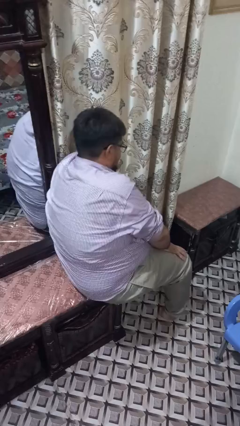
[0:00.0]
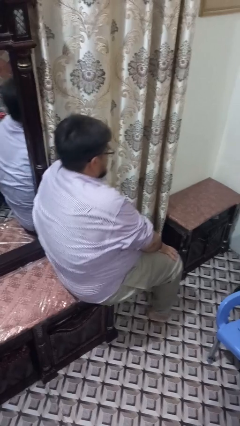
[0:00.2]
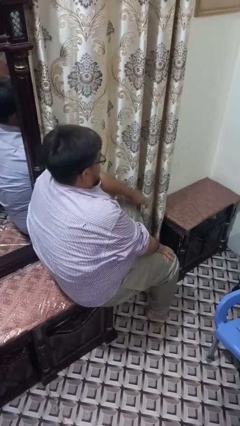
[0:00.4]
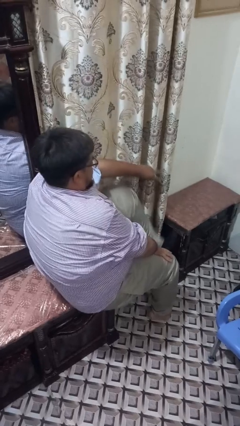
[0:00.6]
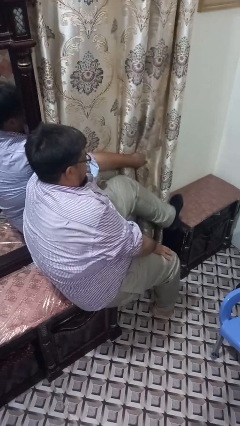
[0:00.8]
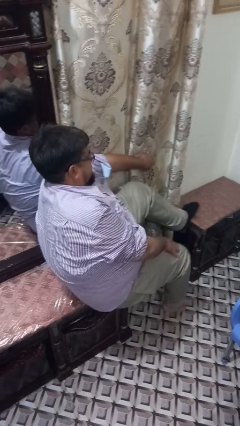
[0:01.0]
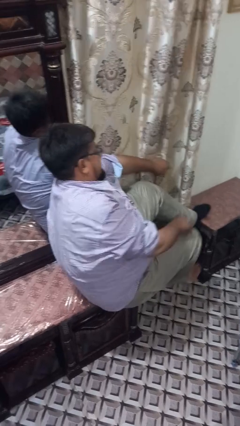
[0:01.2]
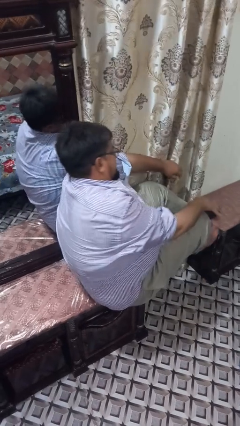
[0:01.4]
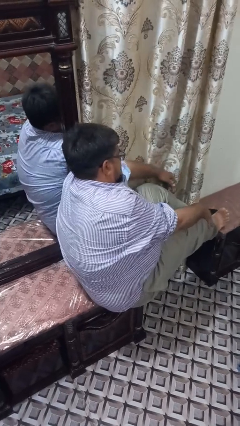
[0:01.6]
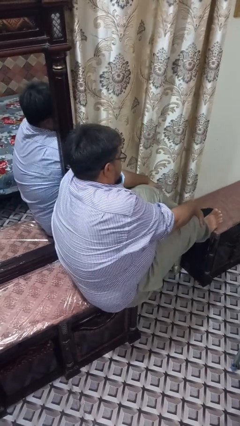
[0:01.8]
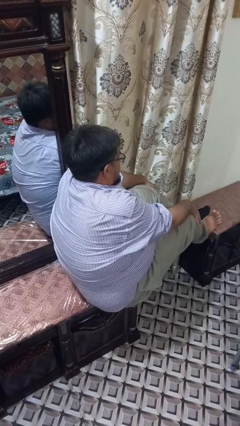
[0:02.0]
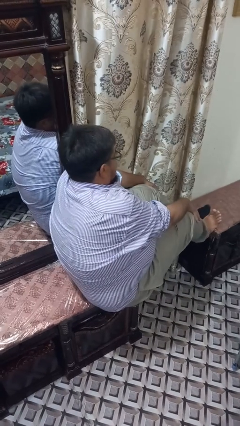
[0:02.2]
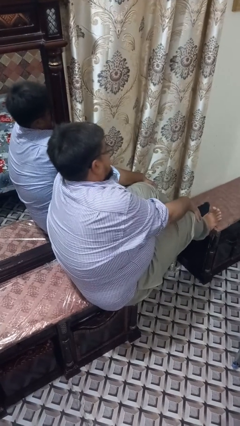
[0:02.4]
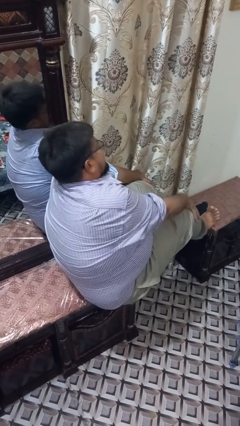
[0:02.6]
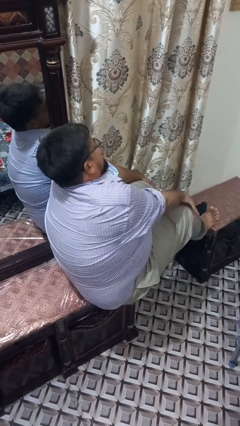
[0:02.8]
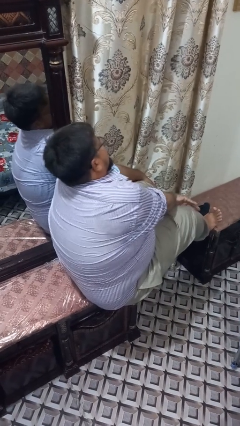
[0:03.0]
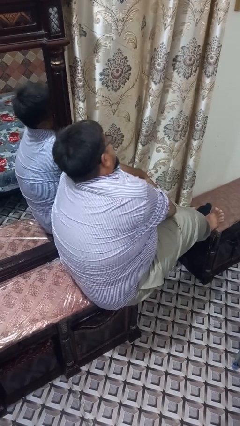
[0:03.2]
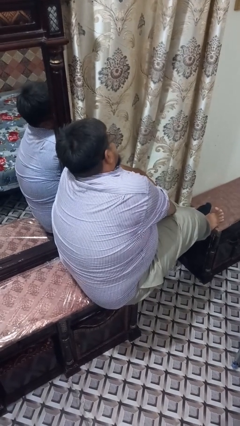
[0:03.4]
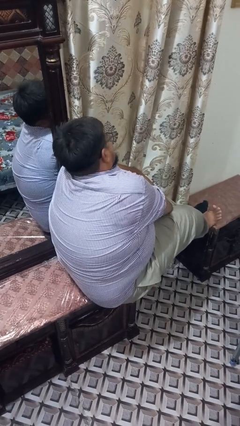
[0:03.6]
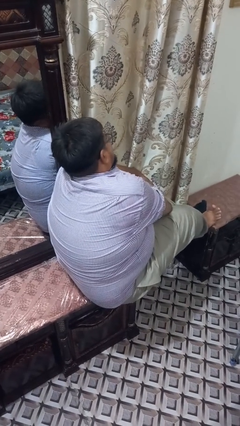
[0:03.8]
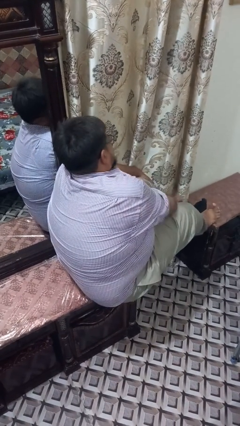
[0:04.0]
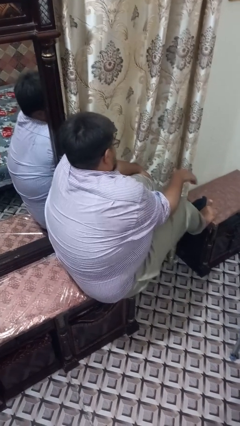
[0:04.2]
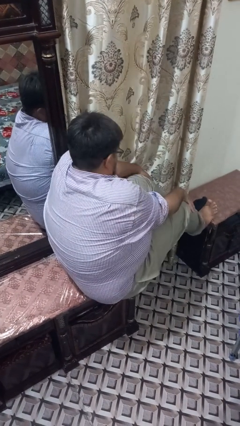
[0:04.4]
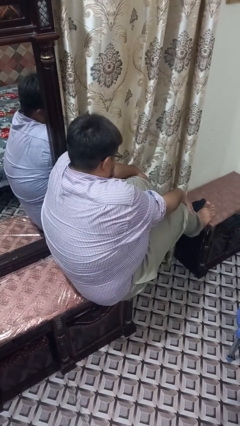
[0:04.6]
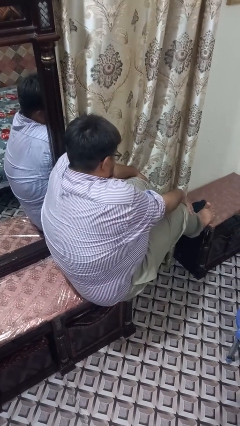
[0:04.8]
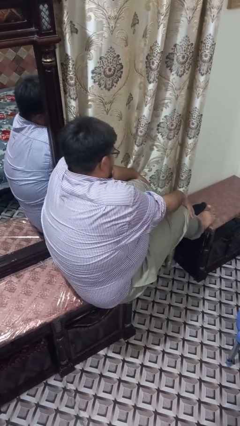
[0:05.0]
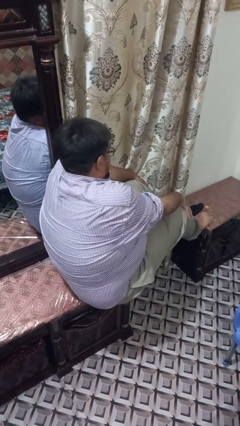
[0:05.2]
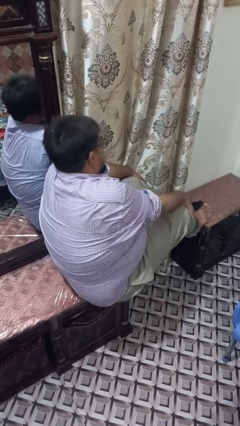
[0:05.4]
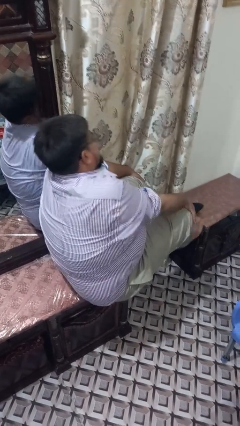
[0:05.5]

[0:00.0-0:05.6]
person puts feet up

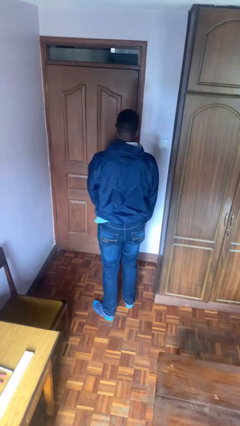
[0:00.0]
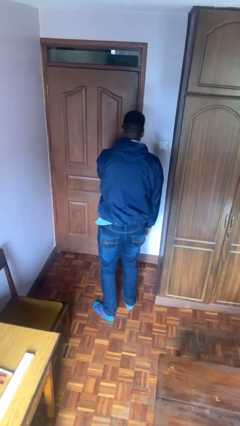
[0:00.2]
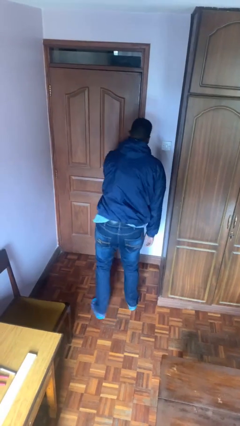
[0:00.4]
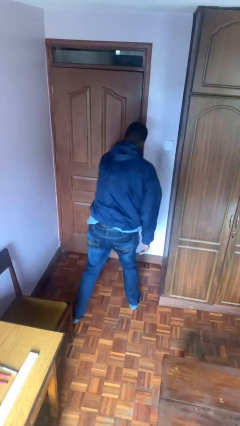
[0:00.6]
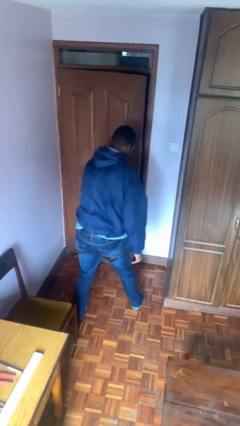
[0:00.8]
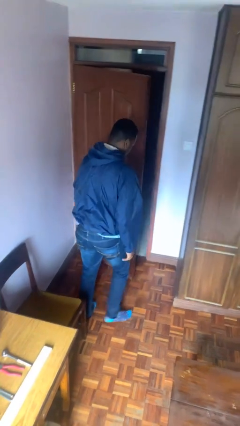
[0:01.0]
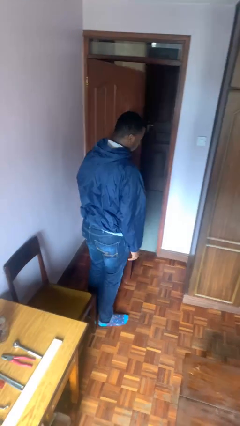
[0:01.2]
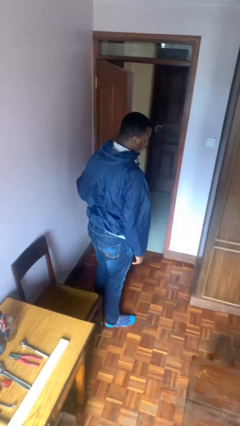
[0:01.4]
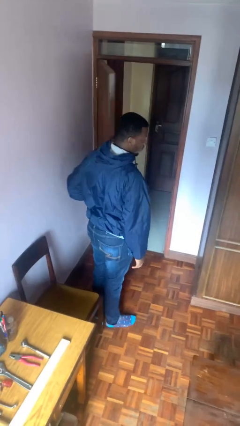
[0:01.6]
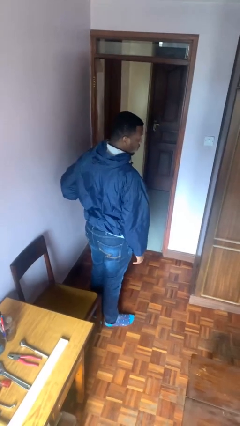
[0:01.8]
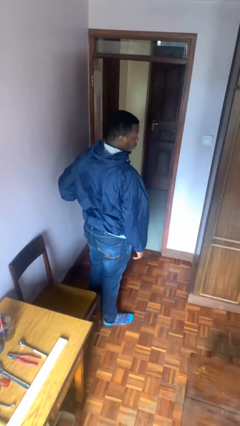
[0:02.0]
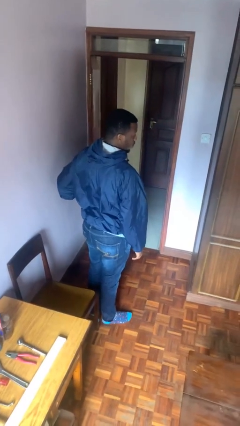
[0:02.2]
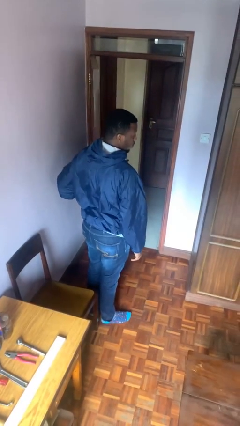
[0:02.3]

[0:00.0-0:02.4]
person opens facility door

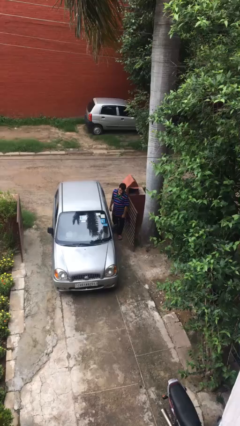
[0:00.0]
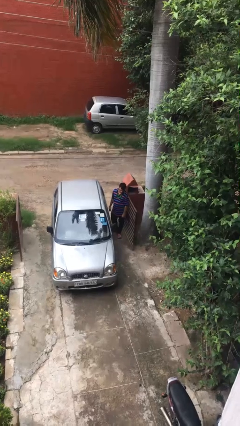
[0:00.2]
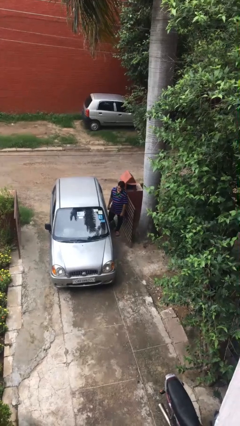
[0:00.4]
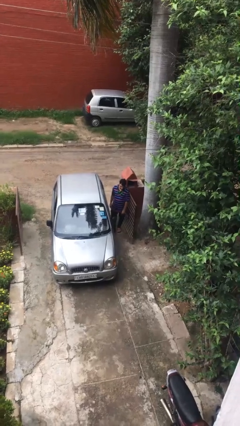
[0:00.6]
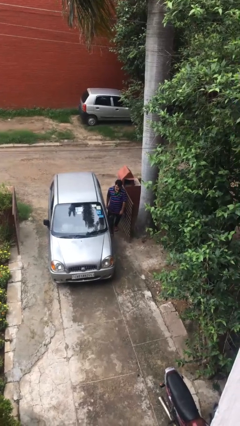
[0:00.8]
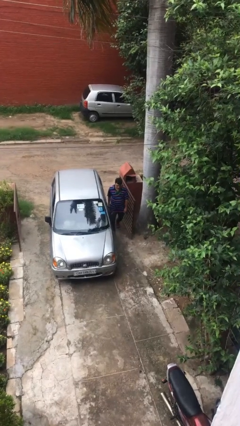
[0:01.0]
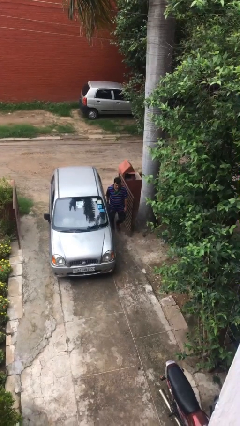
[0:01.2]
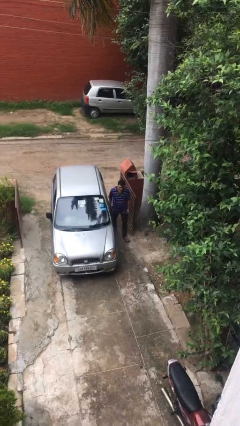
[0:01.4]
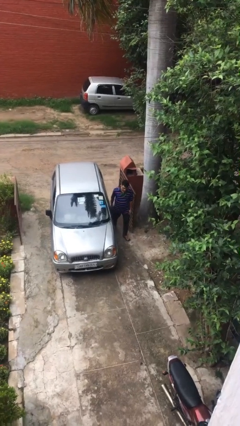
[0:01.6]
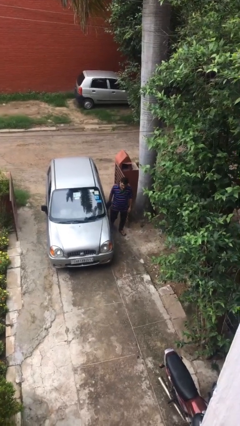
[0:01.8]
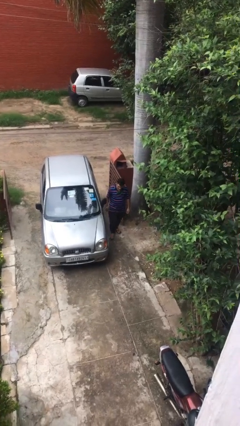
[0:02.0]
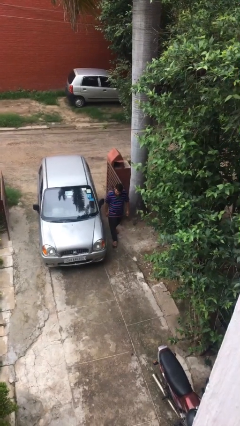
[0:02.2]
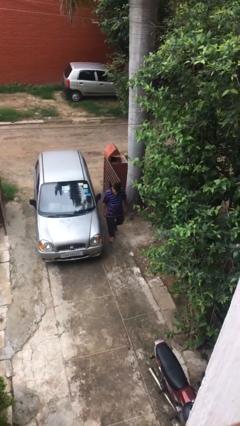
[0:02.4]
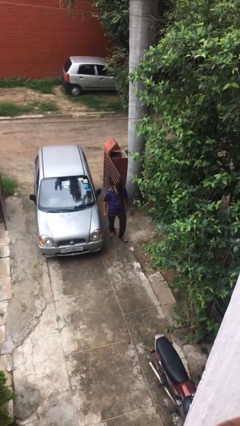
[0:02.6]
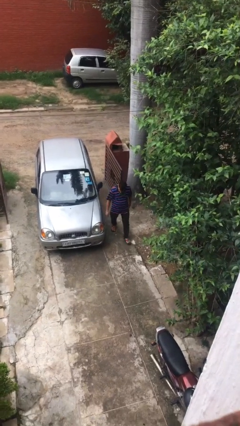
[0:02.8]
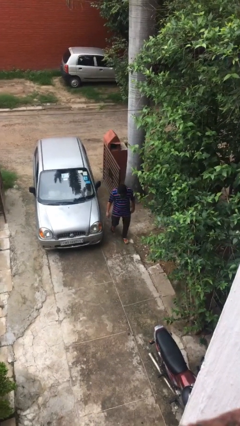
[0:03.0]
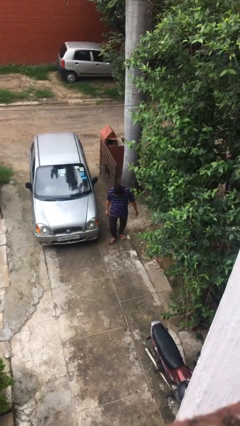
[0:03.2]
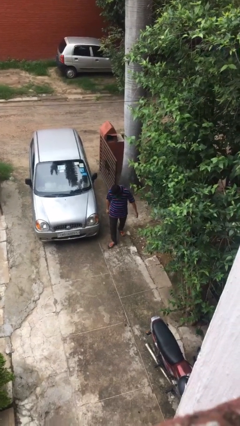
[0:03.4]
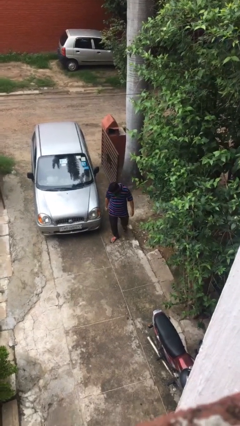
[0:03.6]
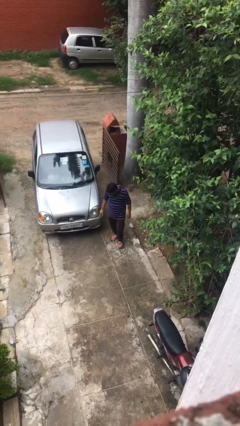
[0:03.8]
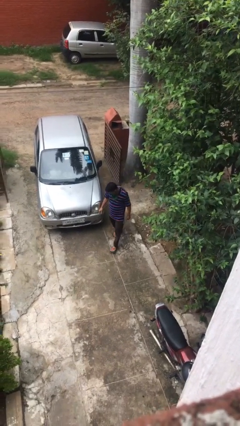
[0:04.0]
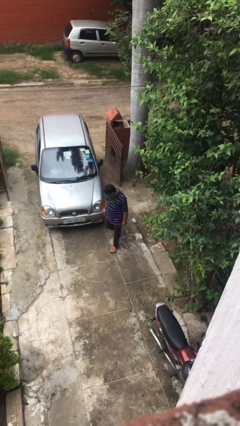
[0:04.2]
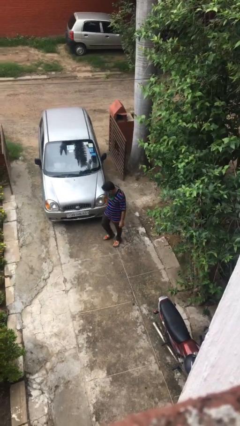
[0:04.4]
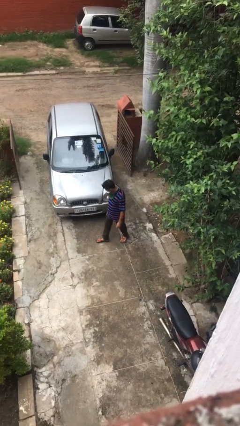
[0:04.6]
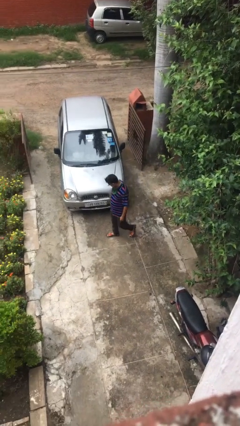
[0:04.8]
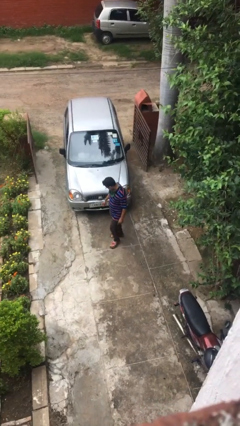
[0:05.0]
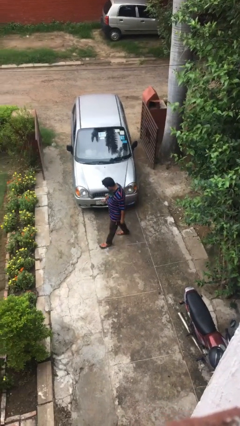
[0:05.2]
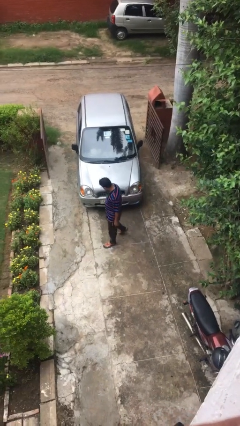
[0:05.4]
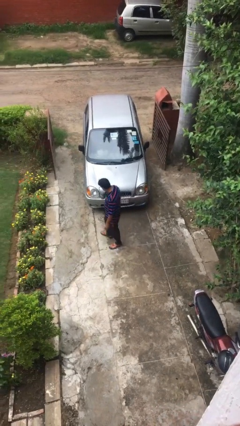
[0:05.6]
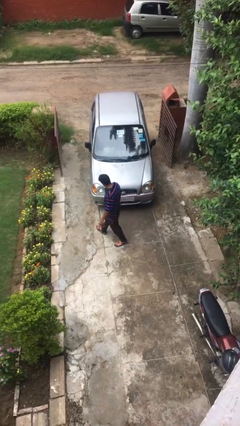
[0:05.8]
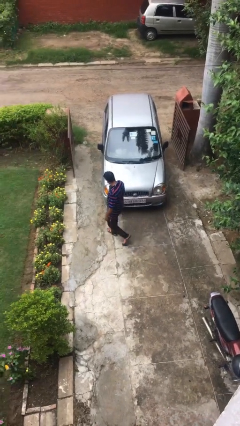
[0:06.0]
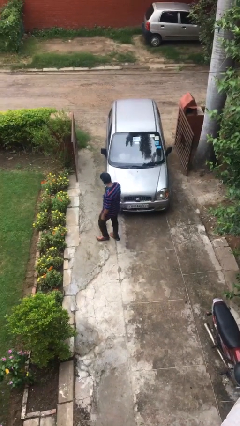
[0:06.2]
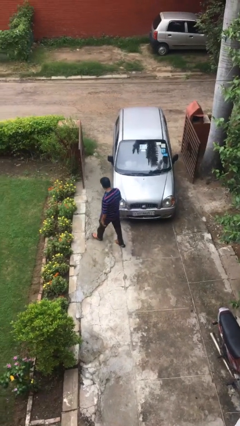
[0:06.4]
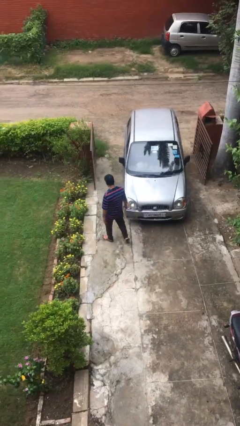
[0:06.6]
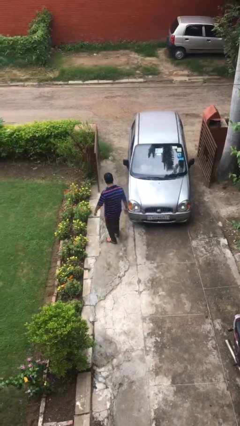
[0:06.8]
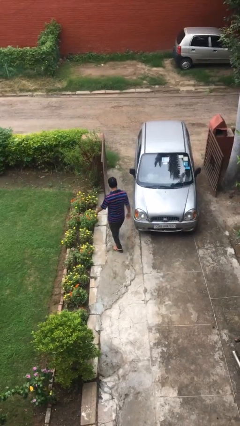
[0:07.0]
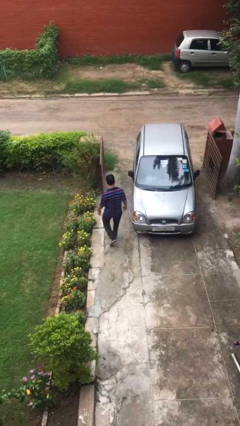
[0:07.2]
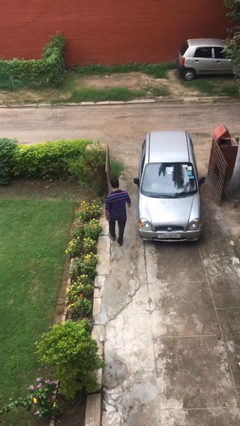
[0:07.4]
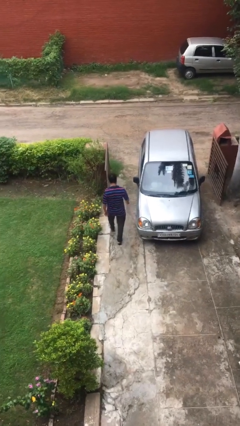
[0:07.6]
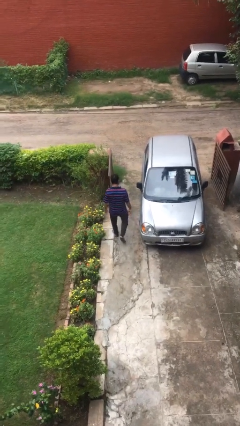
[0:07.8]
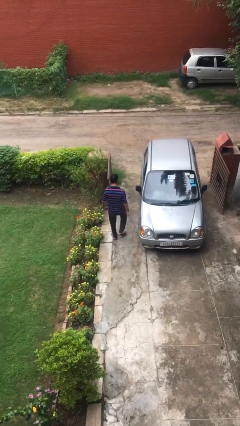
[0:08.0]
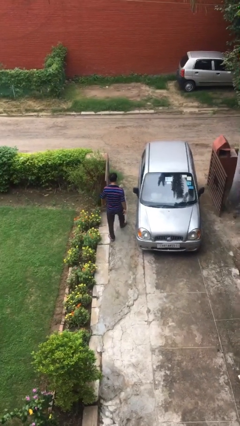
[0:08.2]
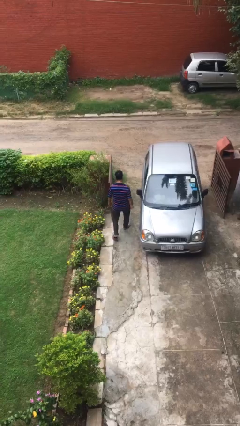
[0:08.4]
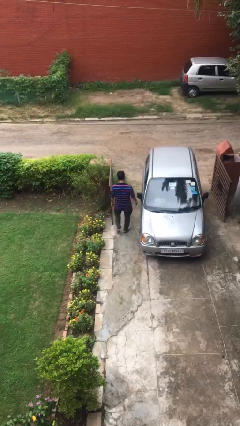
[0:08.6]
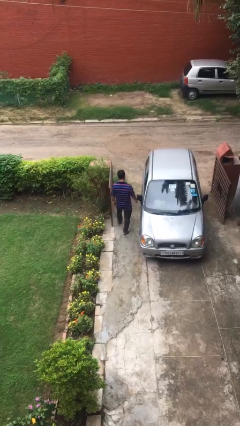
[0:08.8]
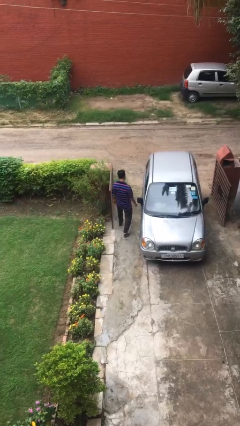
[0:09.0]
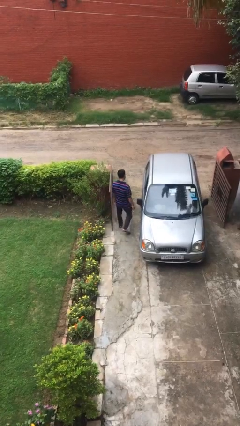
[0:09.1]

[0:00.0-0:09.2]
person walks around car

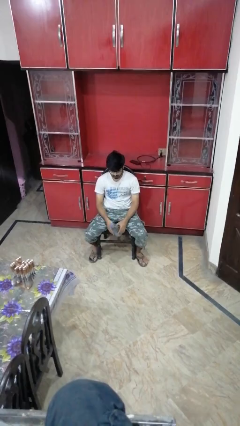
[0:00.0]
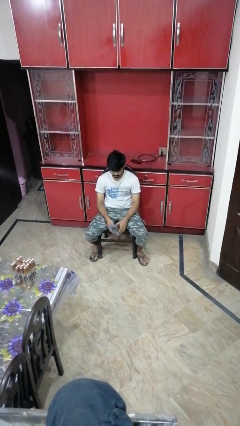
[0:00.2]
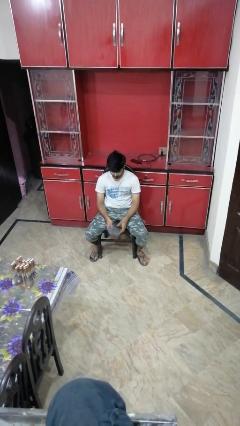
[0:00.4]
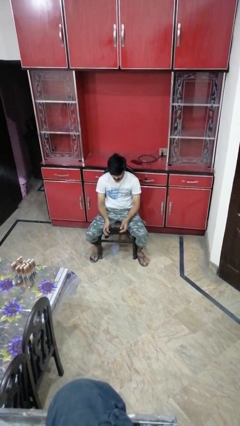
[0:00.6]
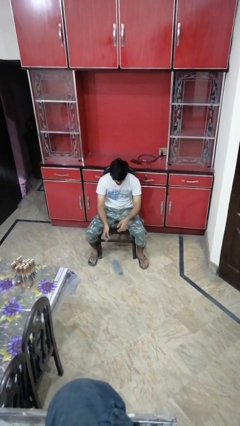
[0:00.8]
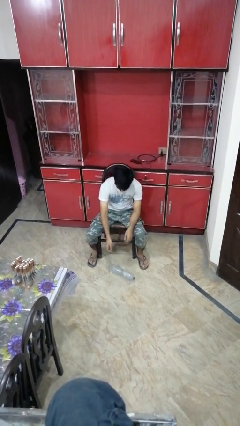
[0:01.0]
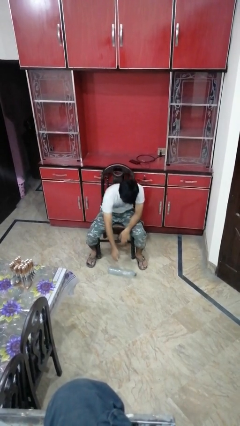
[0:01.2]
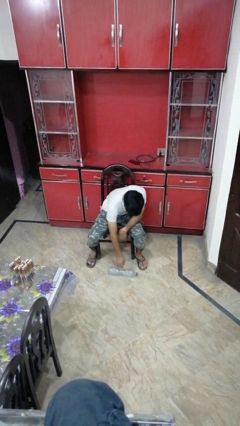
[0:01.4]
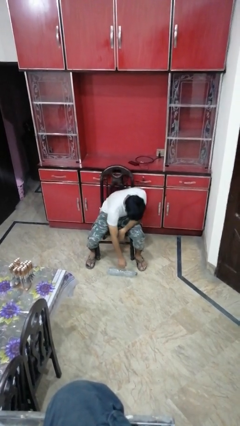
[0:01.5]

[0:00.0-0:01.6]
person drops object
